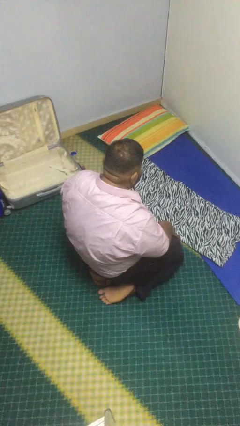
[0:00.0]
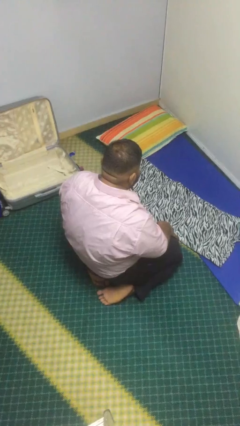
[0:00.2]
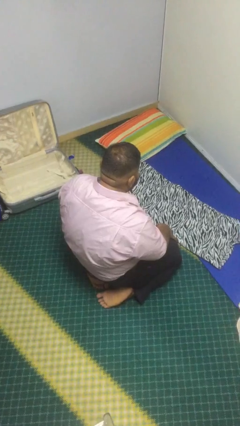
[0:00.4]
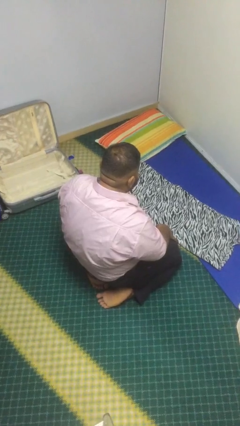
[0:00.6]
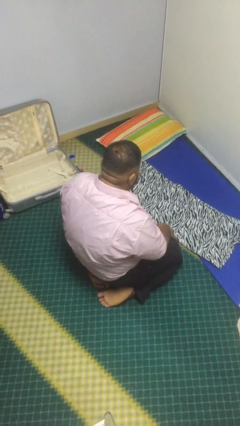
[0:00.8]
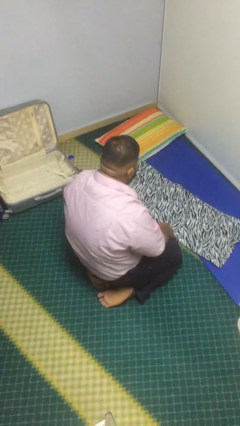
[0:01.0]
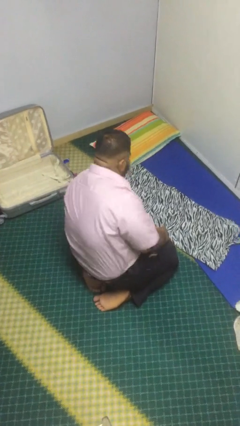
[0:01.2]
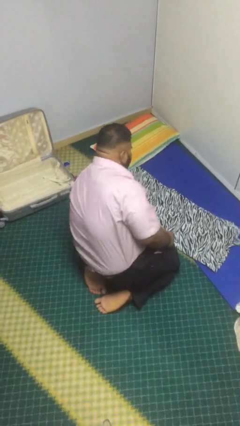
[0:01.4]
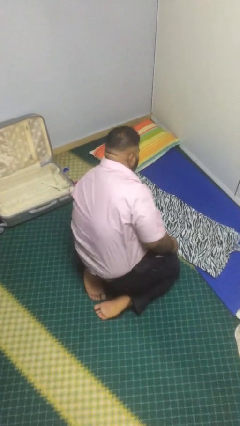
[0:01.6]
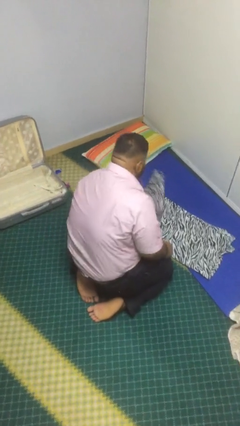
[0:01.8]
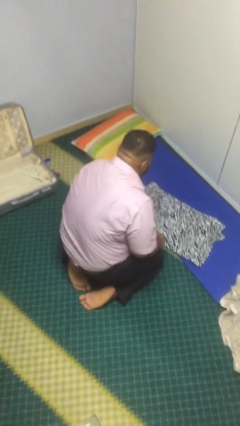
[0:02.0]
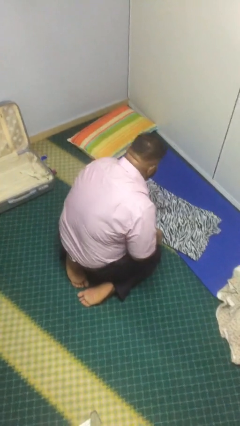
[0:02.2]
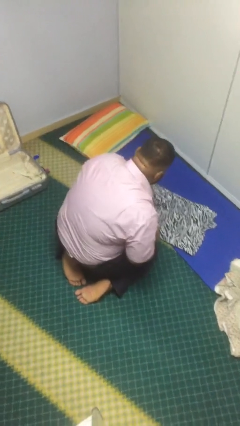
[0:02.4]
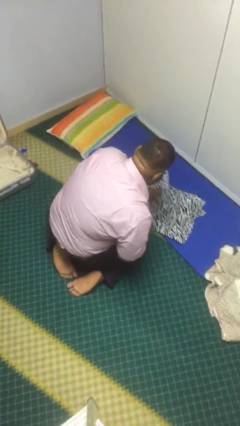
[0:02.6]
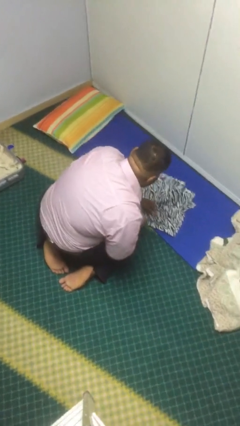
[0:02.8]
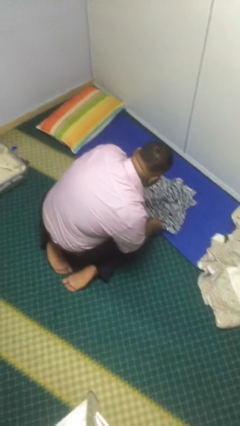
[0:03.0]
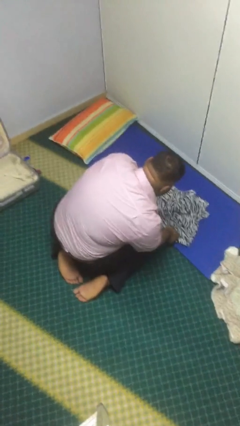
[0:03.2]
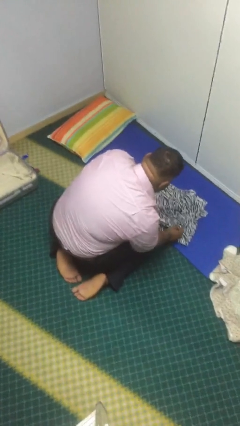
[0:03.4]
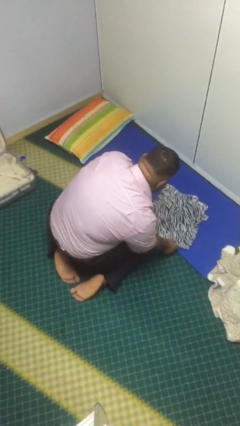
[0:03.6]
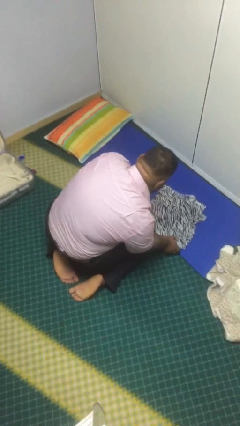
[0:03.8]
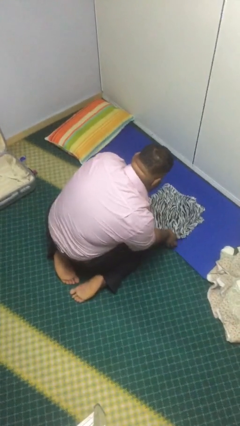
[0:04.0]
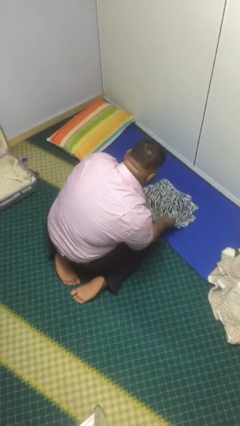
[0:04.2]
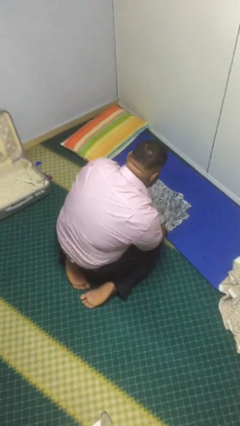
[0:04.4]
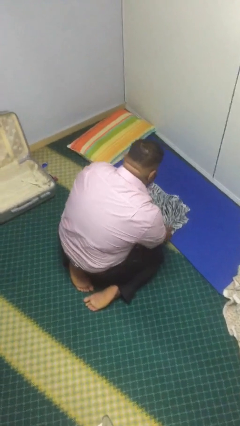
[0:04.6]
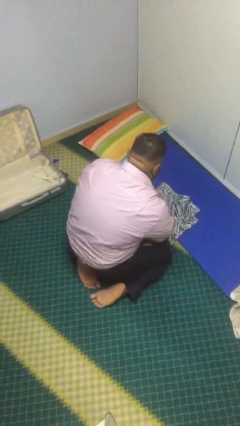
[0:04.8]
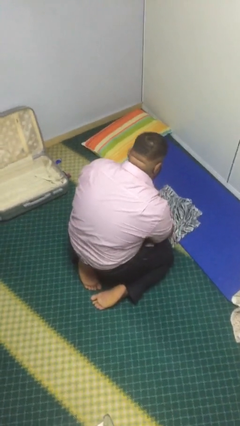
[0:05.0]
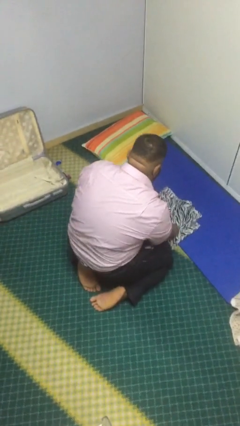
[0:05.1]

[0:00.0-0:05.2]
person folds blanket

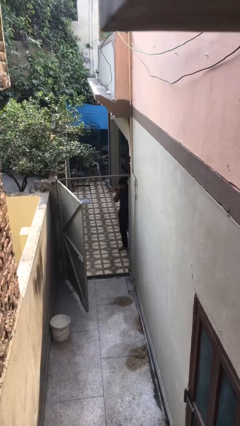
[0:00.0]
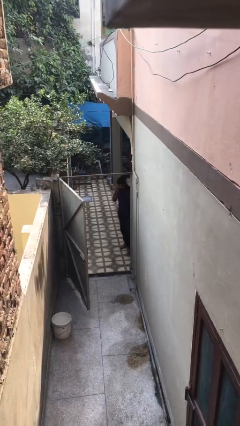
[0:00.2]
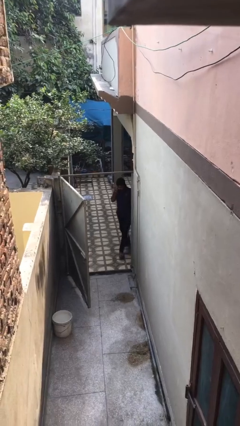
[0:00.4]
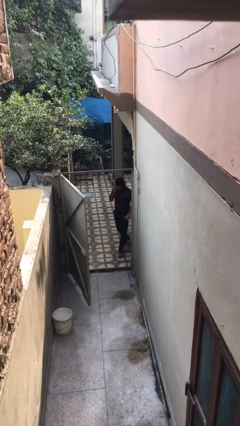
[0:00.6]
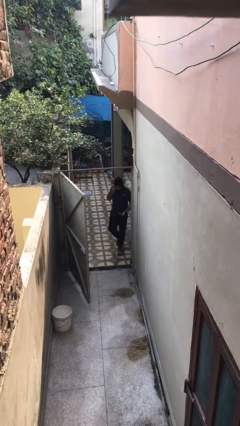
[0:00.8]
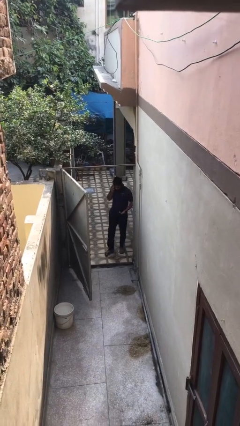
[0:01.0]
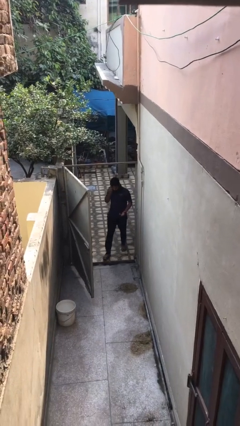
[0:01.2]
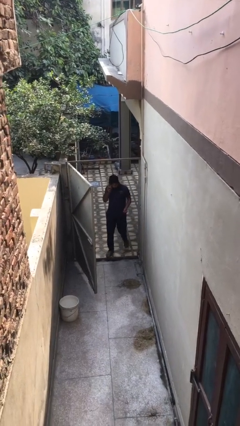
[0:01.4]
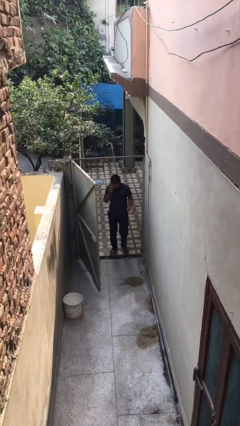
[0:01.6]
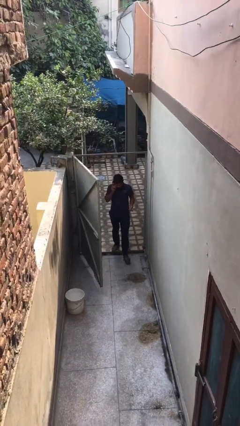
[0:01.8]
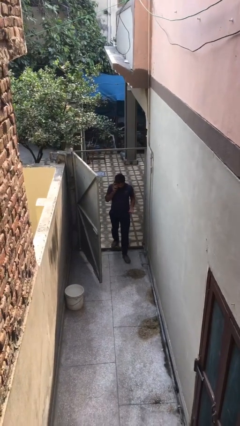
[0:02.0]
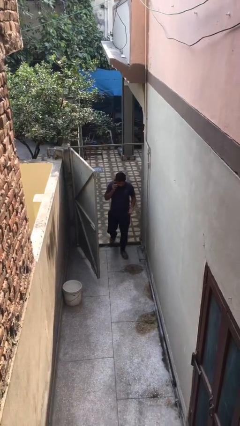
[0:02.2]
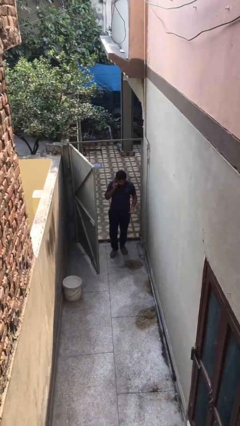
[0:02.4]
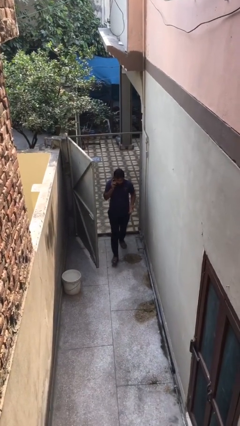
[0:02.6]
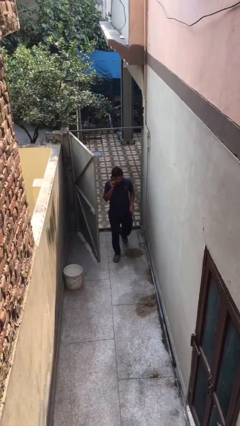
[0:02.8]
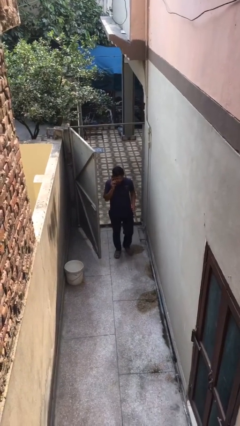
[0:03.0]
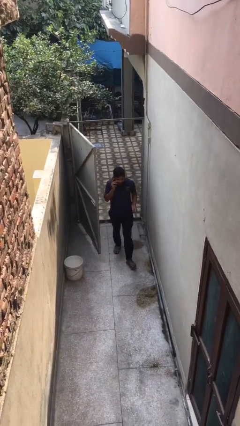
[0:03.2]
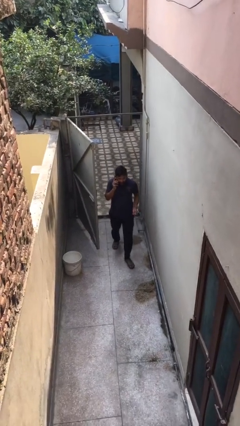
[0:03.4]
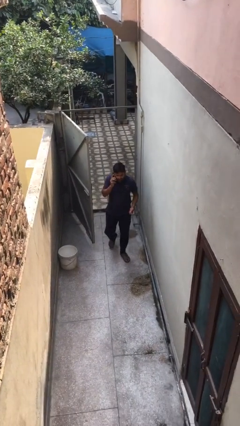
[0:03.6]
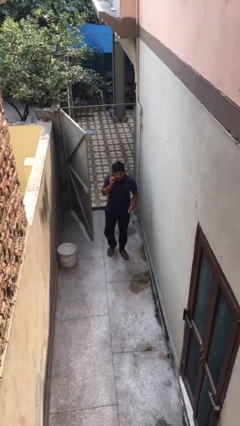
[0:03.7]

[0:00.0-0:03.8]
person enters scene through structure

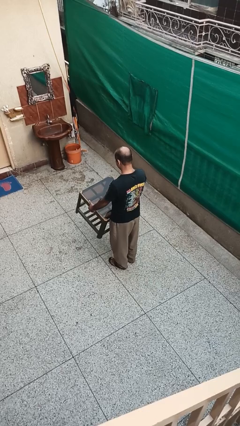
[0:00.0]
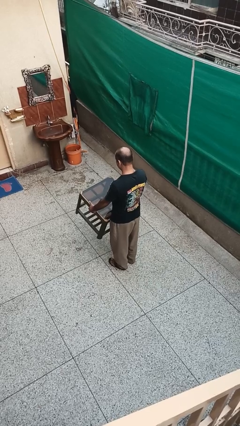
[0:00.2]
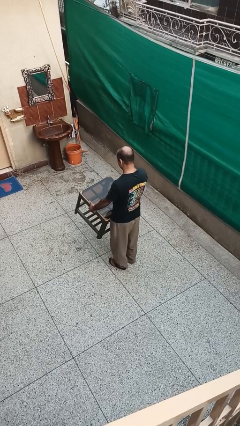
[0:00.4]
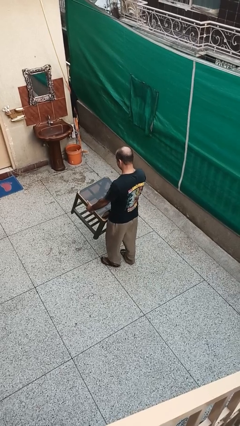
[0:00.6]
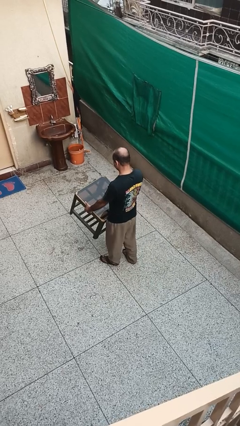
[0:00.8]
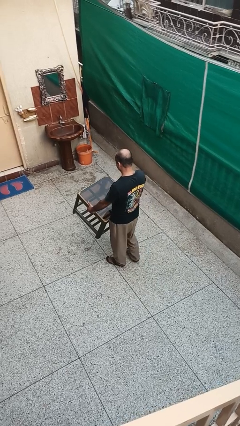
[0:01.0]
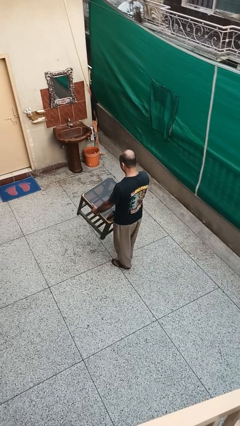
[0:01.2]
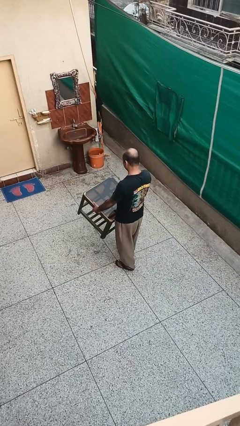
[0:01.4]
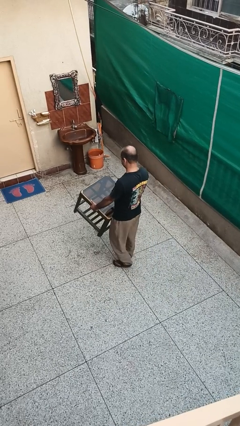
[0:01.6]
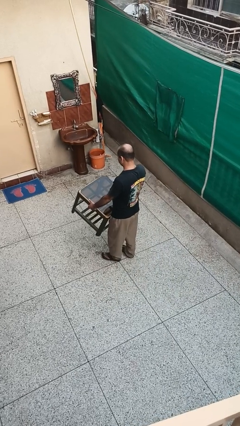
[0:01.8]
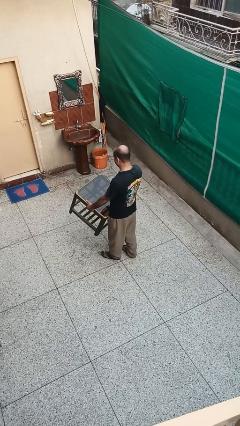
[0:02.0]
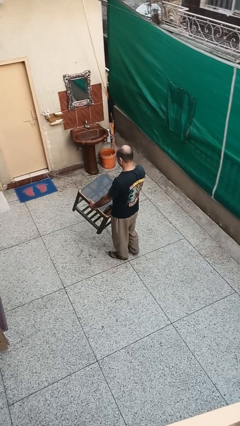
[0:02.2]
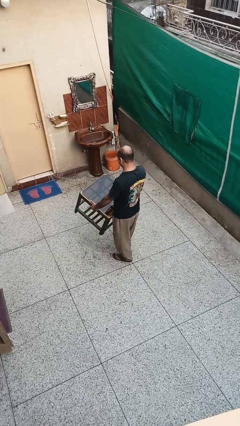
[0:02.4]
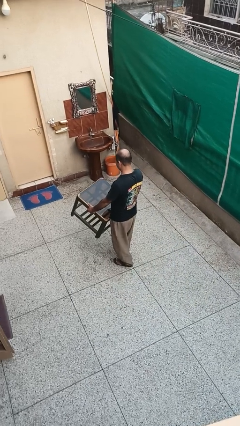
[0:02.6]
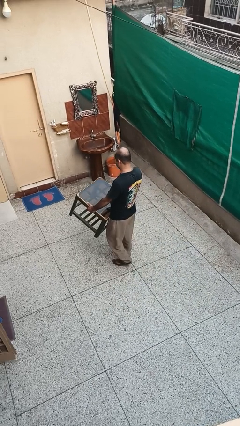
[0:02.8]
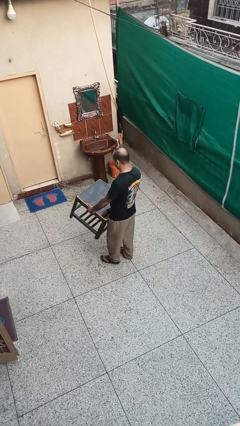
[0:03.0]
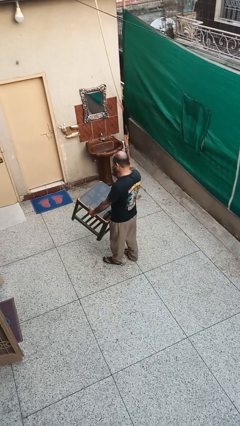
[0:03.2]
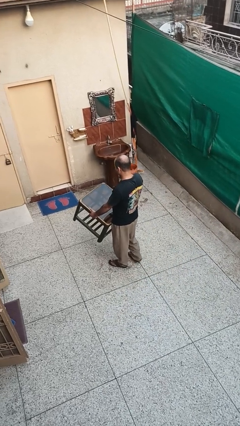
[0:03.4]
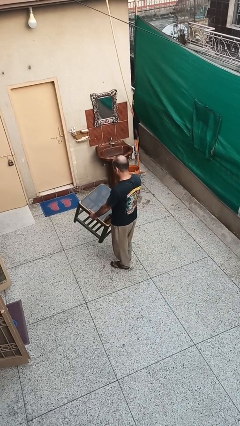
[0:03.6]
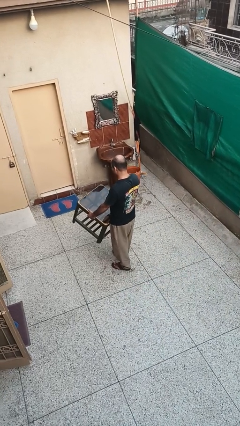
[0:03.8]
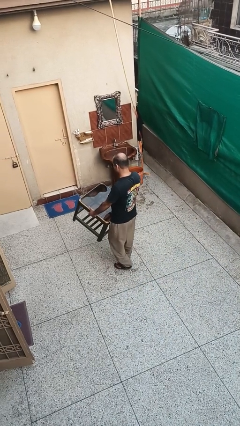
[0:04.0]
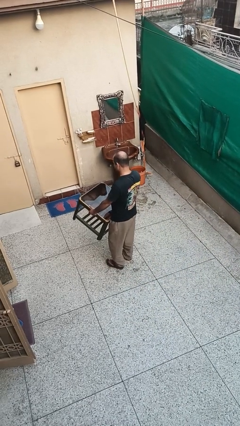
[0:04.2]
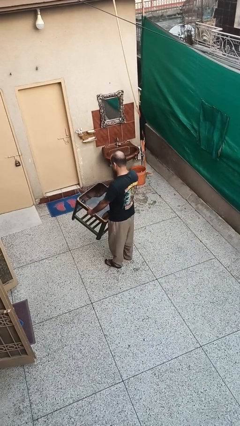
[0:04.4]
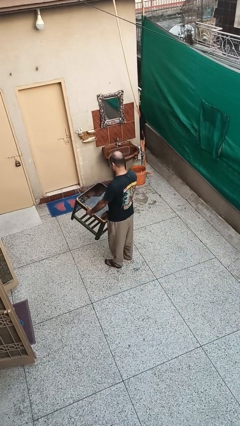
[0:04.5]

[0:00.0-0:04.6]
person carries furniture

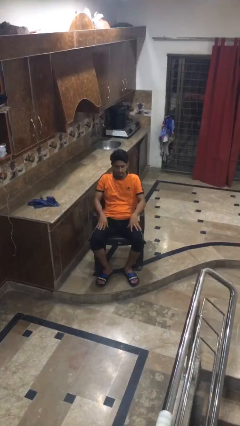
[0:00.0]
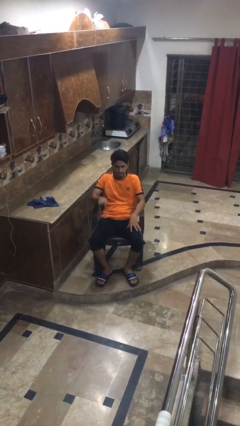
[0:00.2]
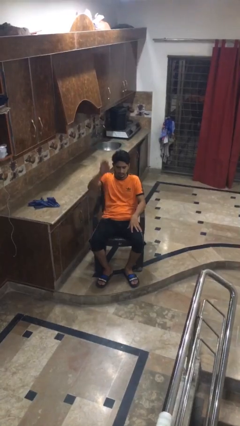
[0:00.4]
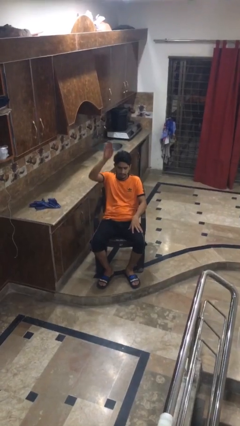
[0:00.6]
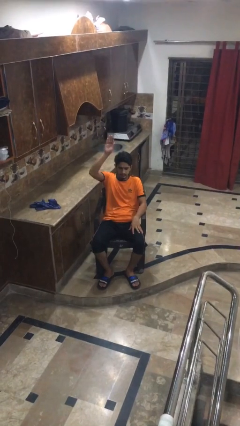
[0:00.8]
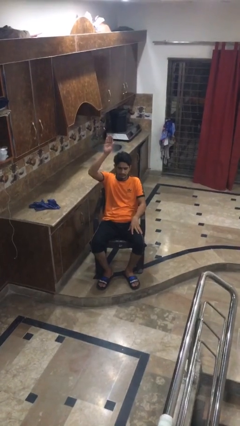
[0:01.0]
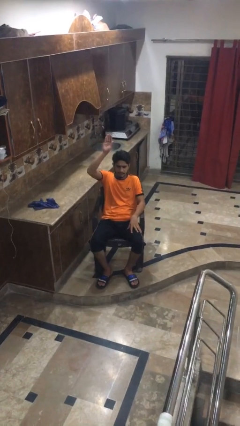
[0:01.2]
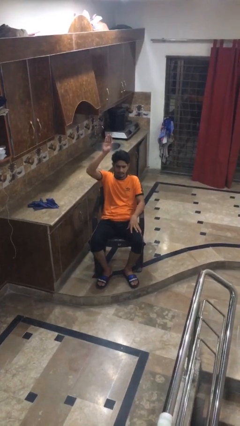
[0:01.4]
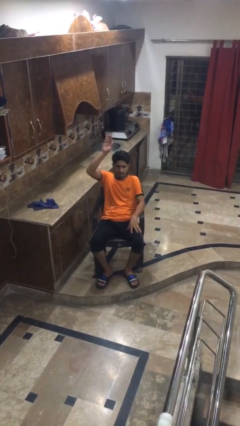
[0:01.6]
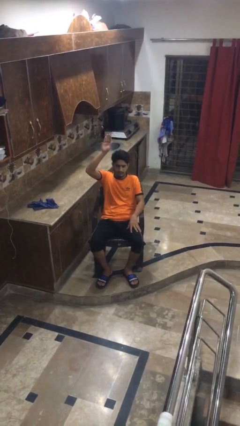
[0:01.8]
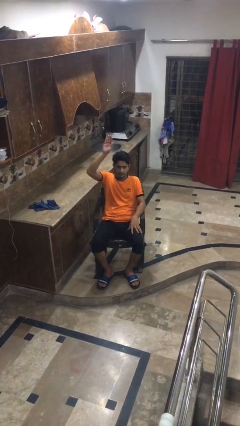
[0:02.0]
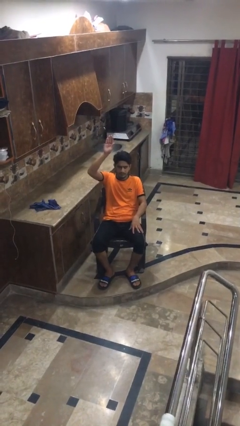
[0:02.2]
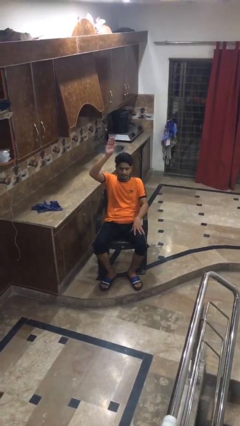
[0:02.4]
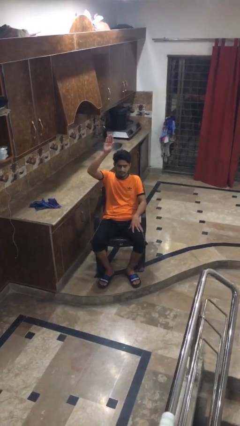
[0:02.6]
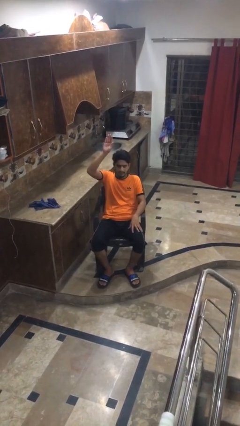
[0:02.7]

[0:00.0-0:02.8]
person gestures raise hand

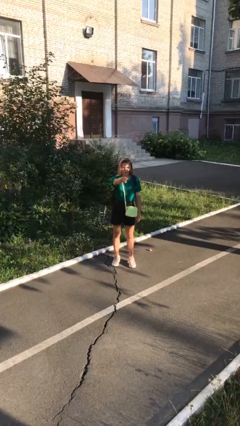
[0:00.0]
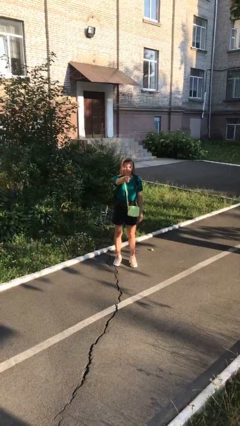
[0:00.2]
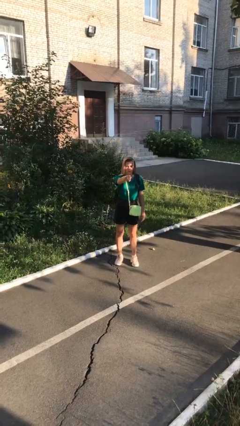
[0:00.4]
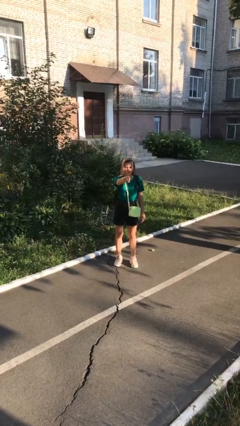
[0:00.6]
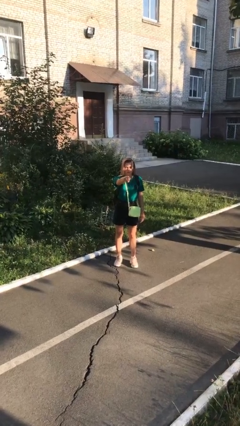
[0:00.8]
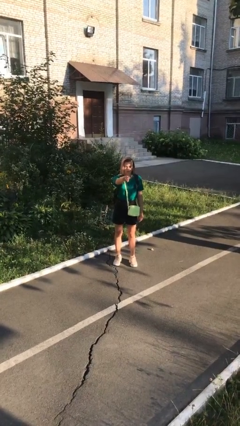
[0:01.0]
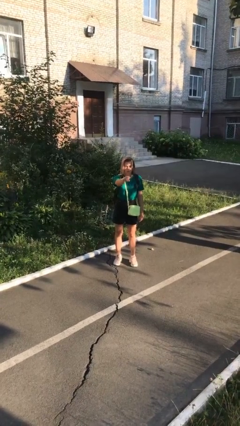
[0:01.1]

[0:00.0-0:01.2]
person points at person

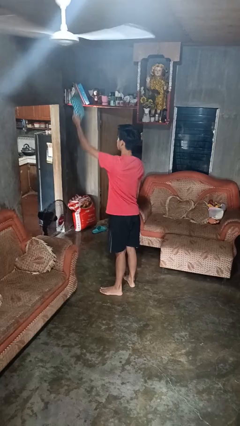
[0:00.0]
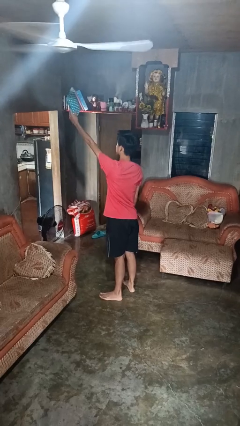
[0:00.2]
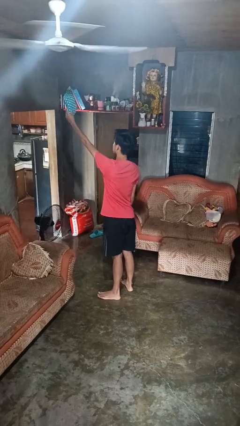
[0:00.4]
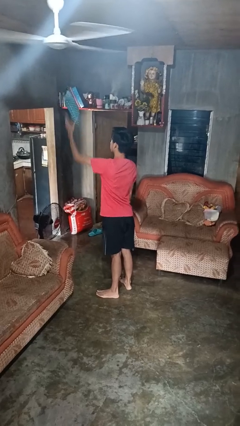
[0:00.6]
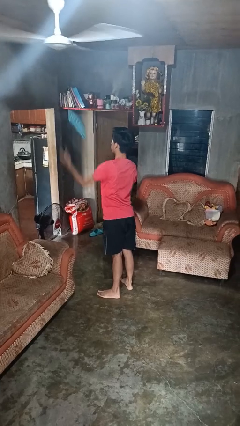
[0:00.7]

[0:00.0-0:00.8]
person drops object
